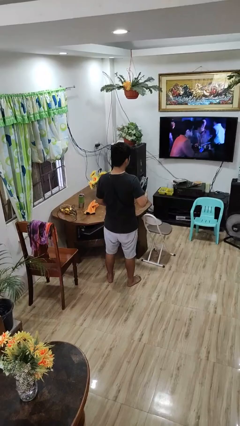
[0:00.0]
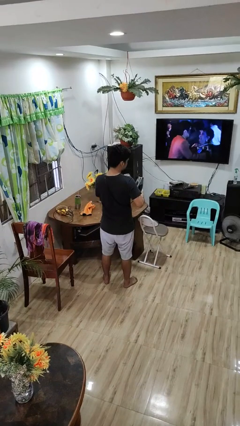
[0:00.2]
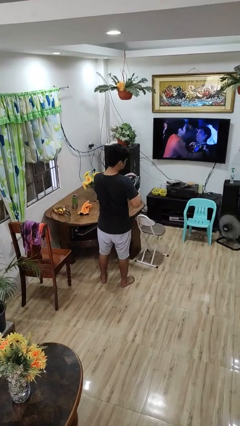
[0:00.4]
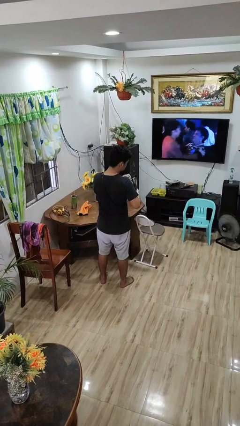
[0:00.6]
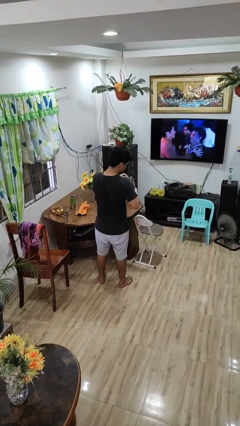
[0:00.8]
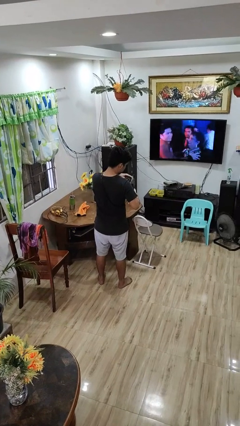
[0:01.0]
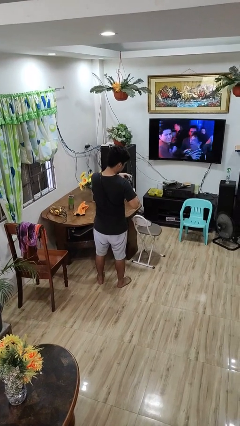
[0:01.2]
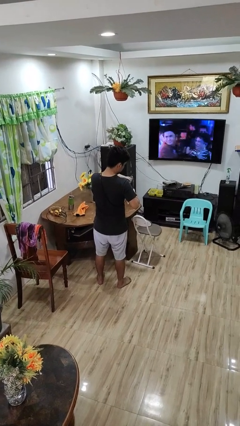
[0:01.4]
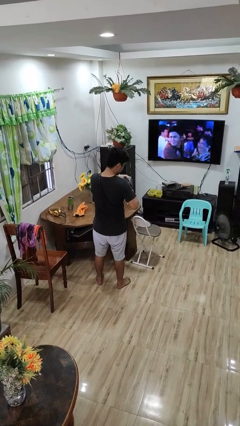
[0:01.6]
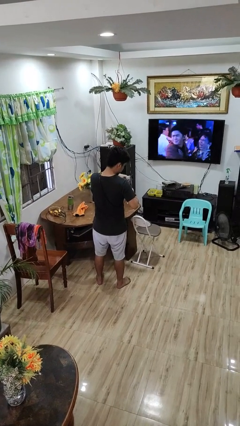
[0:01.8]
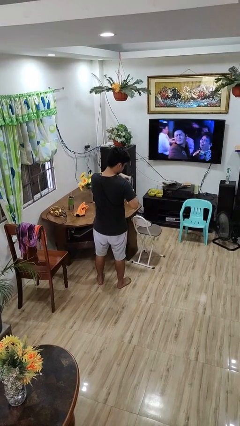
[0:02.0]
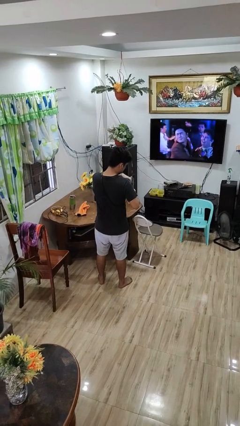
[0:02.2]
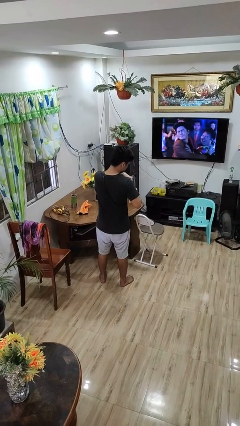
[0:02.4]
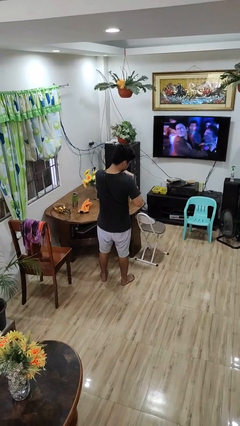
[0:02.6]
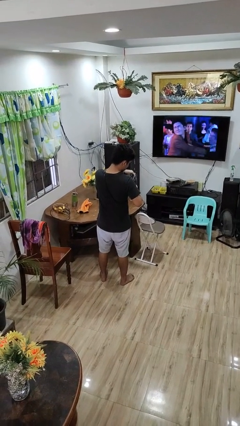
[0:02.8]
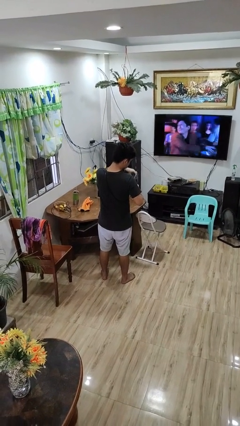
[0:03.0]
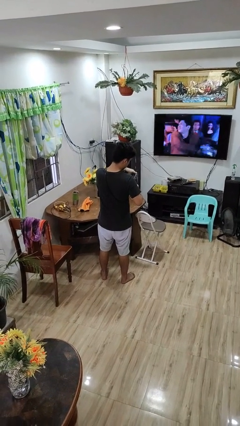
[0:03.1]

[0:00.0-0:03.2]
person searches in purse

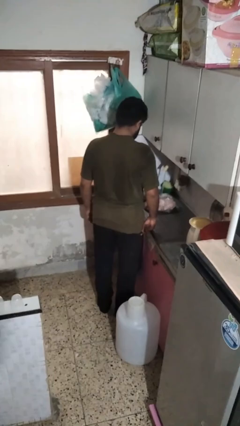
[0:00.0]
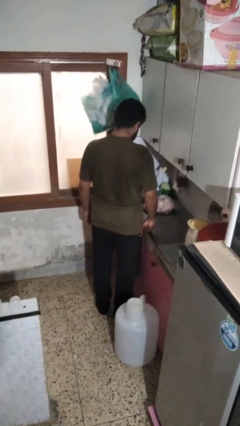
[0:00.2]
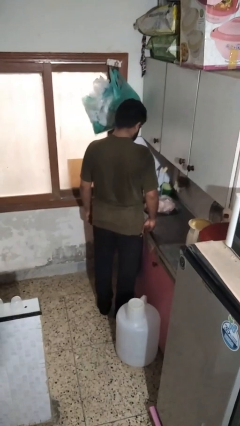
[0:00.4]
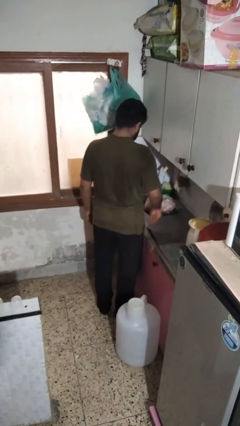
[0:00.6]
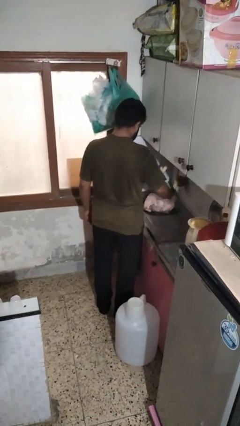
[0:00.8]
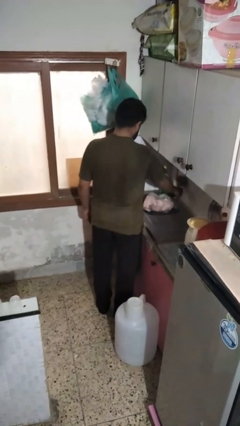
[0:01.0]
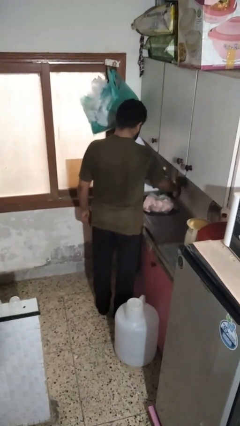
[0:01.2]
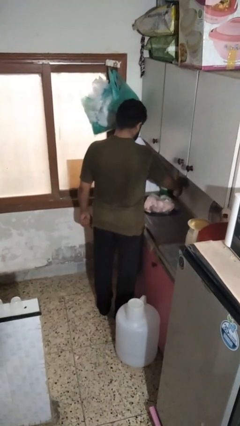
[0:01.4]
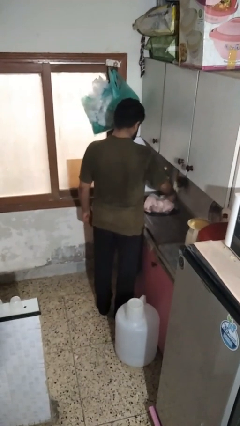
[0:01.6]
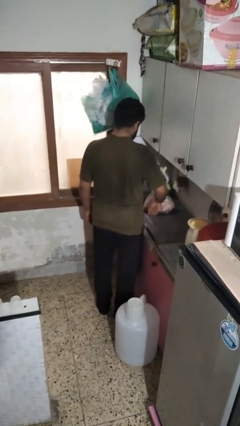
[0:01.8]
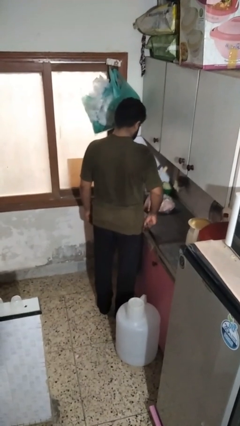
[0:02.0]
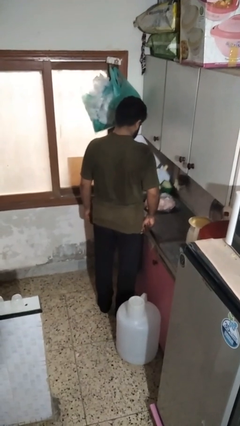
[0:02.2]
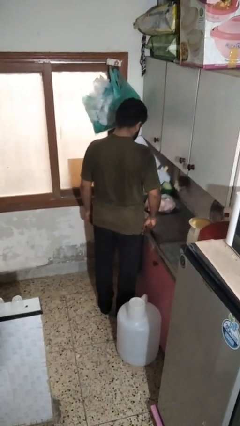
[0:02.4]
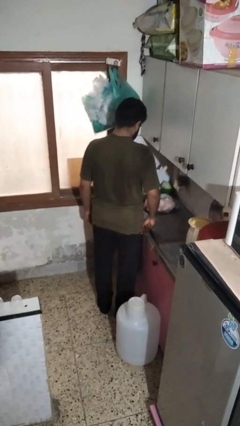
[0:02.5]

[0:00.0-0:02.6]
person turns off faucet

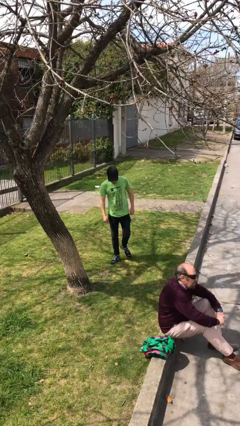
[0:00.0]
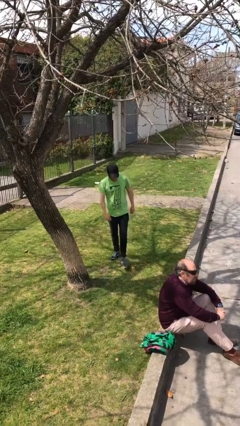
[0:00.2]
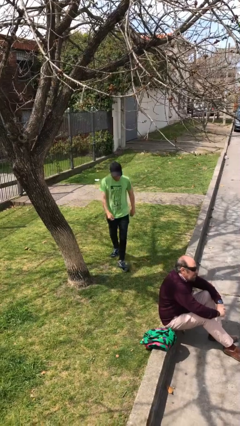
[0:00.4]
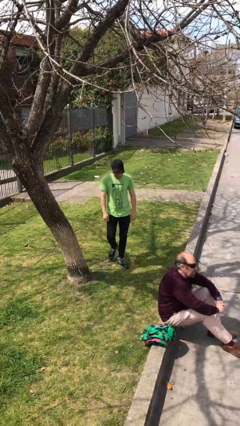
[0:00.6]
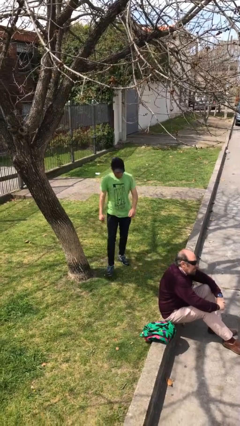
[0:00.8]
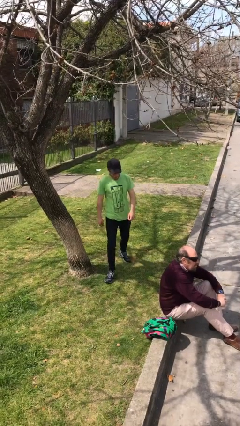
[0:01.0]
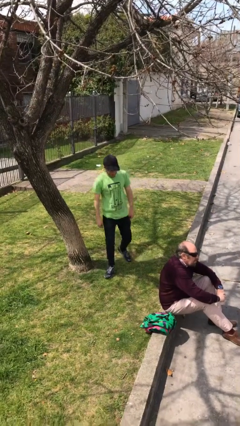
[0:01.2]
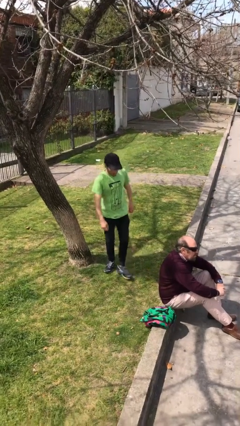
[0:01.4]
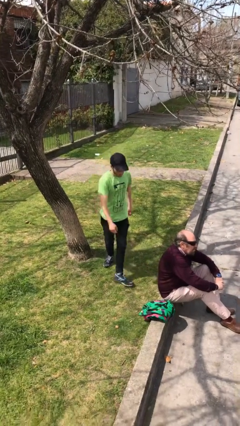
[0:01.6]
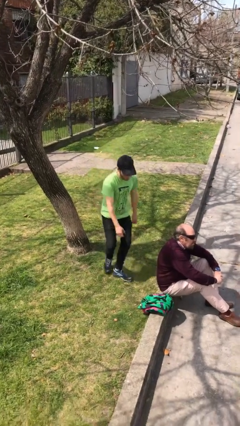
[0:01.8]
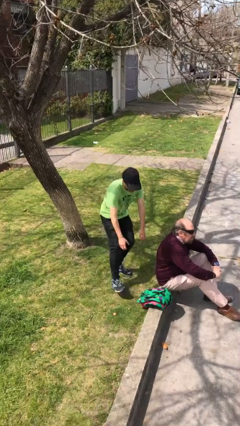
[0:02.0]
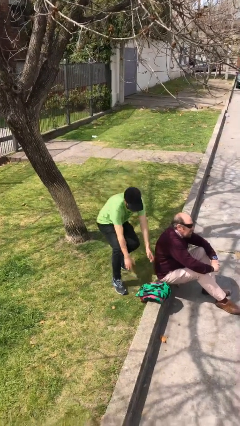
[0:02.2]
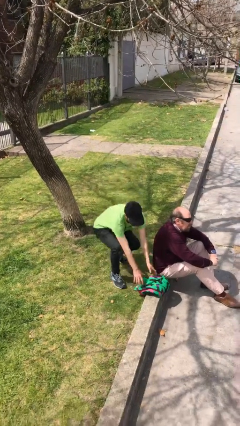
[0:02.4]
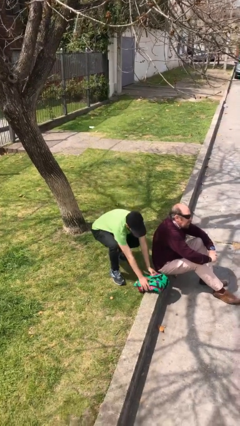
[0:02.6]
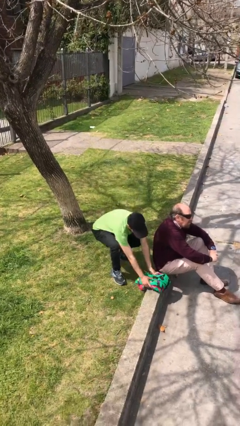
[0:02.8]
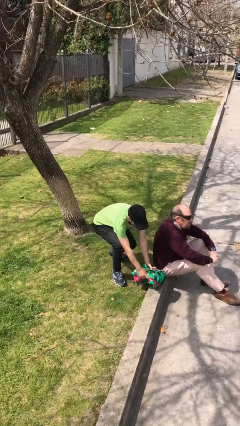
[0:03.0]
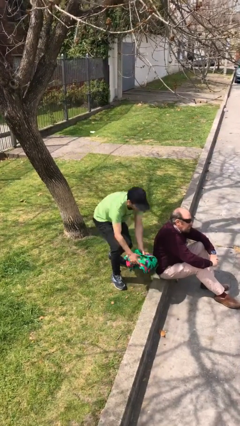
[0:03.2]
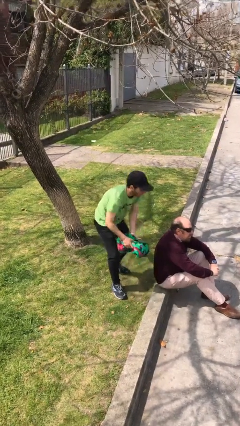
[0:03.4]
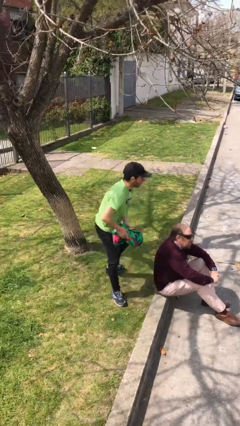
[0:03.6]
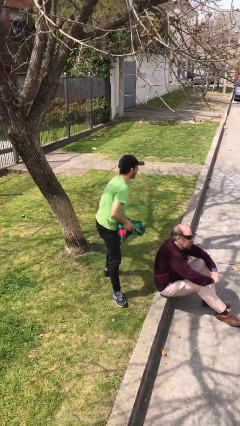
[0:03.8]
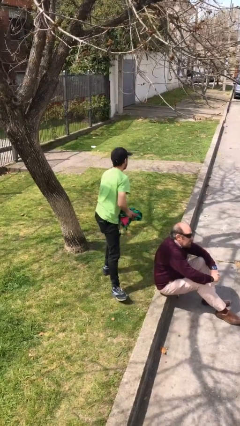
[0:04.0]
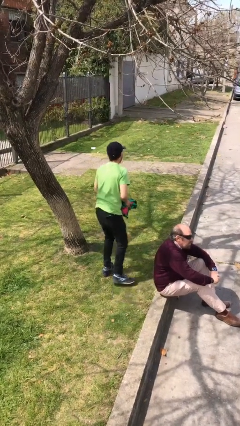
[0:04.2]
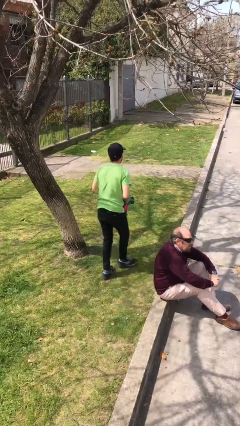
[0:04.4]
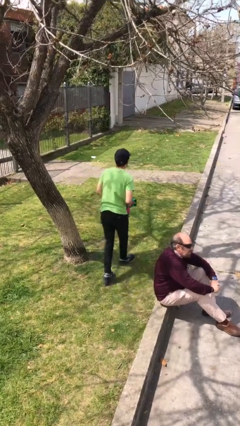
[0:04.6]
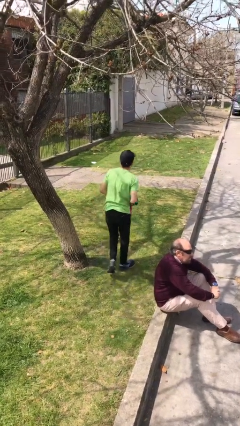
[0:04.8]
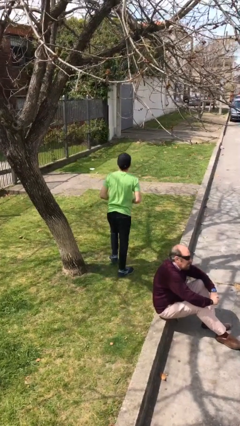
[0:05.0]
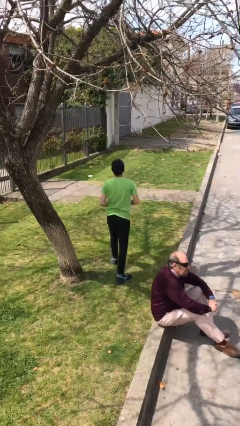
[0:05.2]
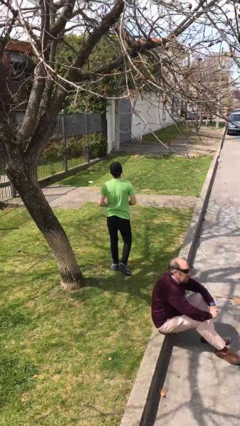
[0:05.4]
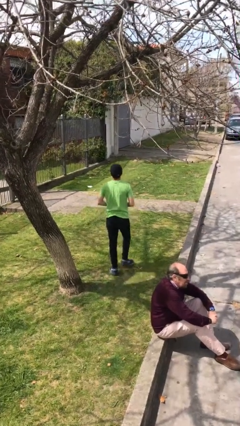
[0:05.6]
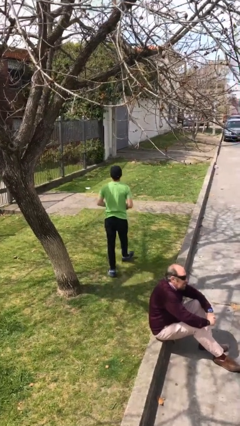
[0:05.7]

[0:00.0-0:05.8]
person steals object from person

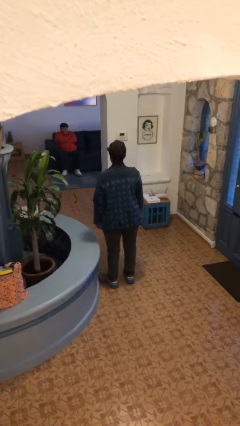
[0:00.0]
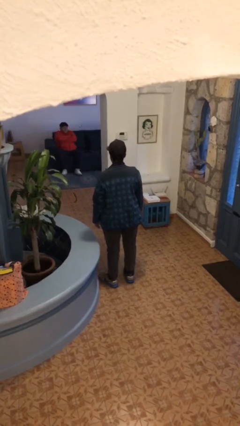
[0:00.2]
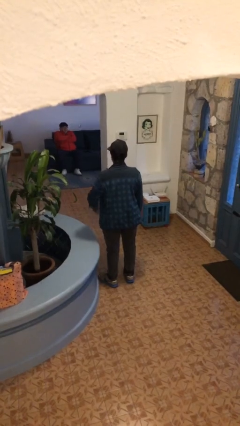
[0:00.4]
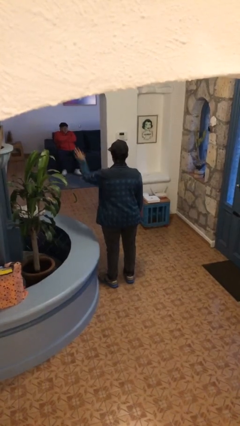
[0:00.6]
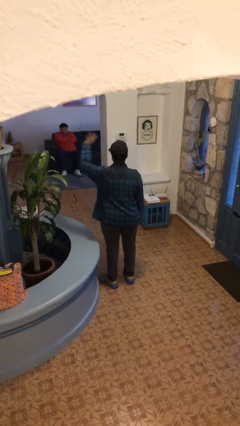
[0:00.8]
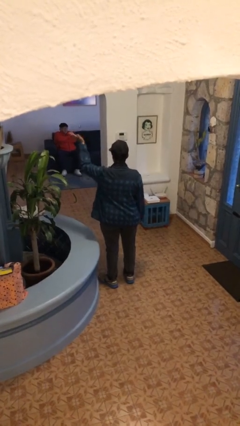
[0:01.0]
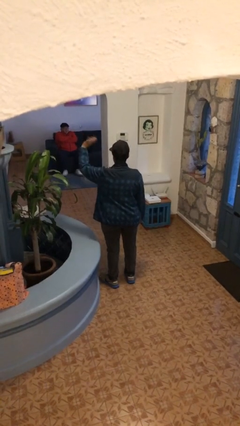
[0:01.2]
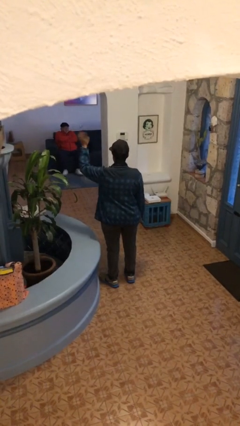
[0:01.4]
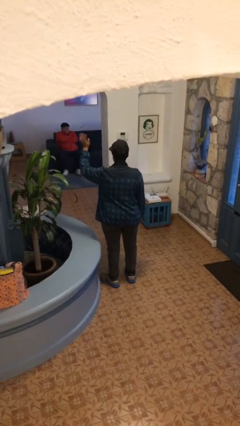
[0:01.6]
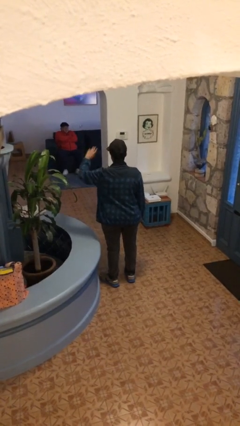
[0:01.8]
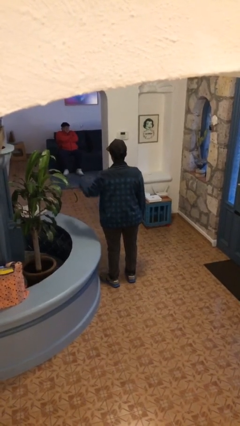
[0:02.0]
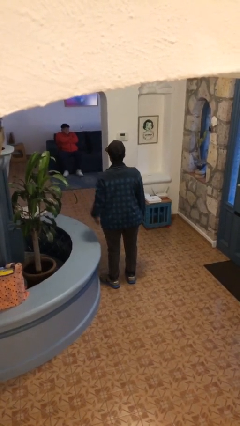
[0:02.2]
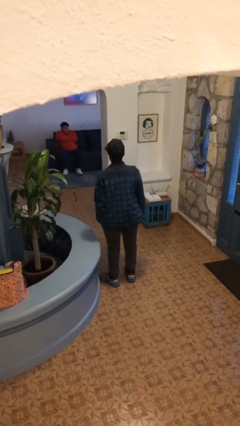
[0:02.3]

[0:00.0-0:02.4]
person waves at person

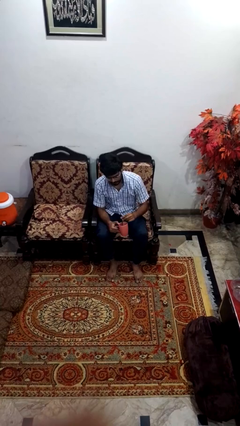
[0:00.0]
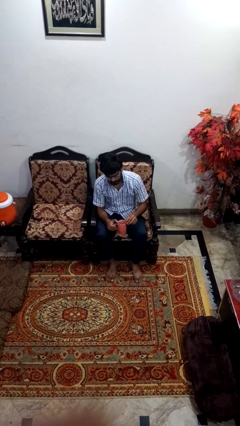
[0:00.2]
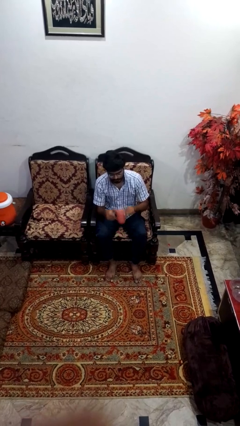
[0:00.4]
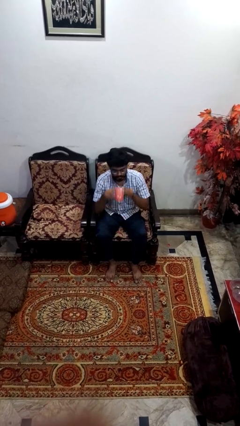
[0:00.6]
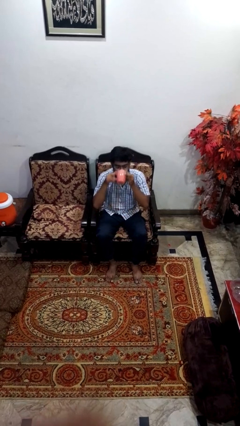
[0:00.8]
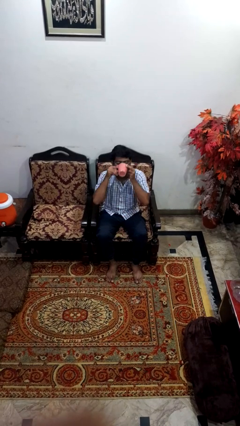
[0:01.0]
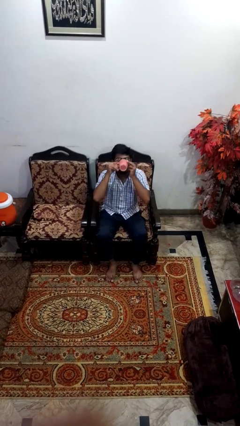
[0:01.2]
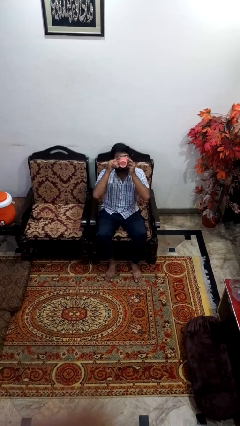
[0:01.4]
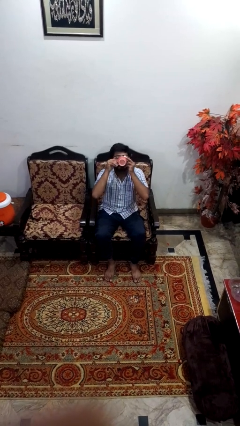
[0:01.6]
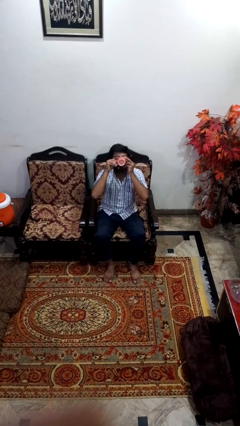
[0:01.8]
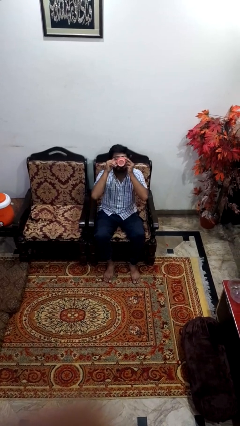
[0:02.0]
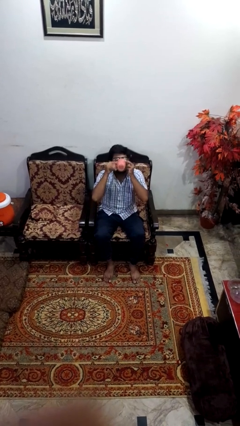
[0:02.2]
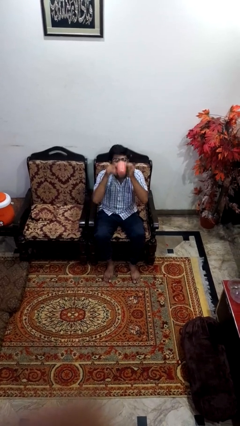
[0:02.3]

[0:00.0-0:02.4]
person drinks from mug
